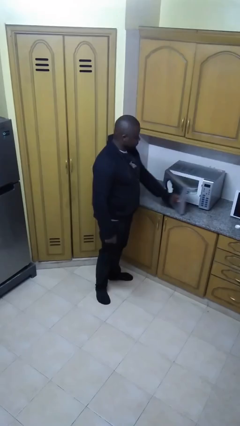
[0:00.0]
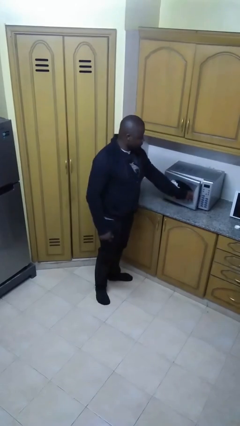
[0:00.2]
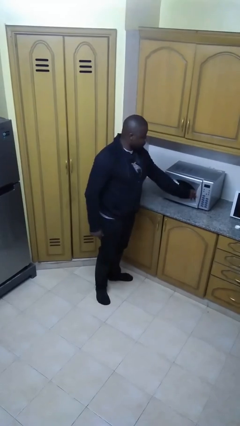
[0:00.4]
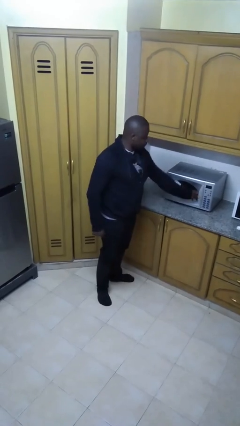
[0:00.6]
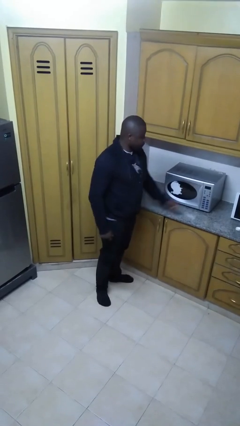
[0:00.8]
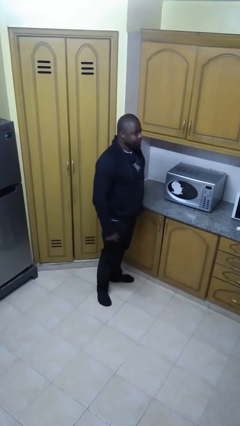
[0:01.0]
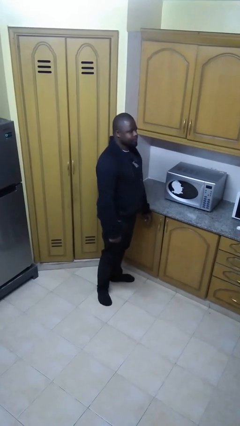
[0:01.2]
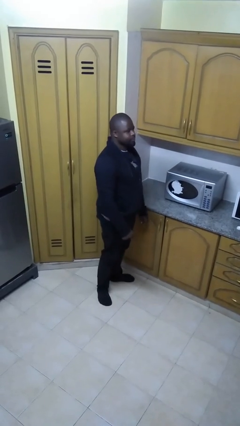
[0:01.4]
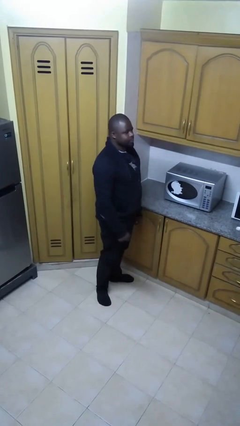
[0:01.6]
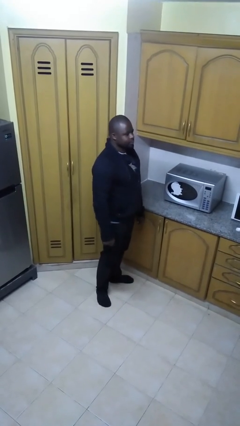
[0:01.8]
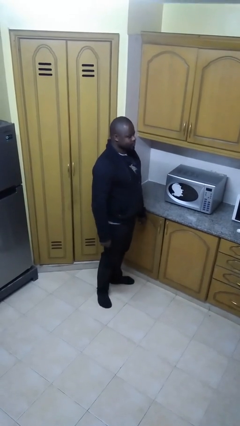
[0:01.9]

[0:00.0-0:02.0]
person closes microwave

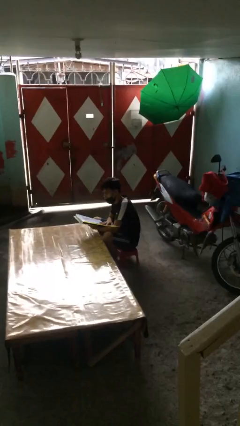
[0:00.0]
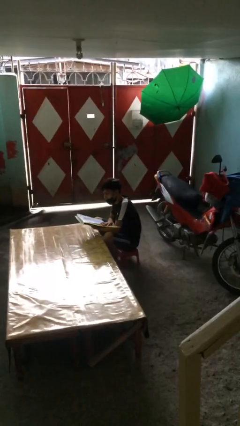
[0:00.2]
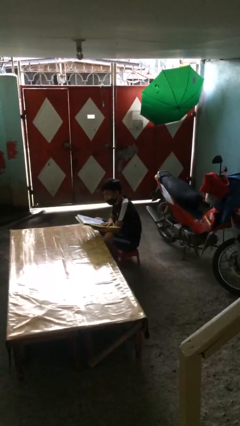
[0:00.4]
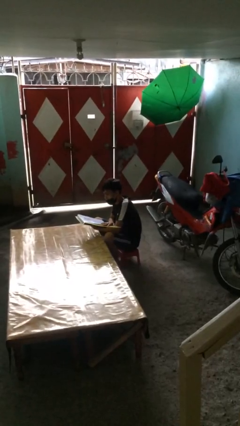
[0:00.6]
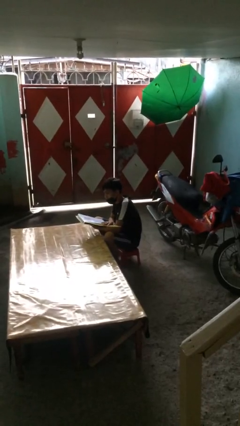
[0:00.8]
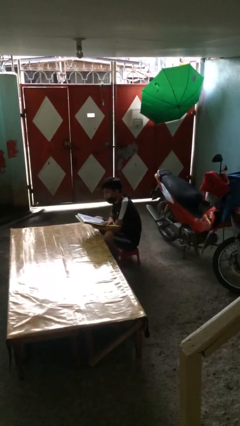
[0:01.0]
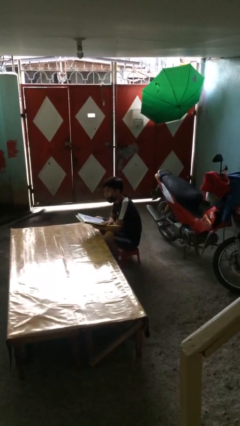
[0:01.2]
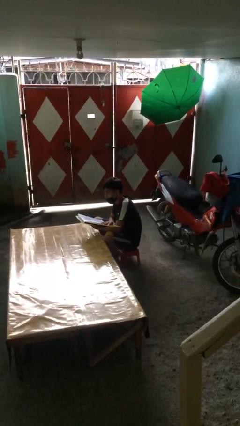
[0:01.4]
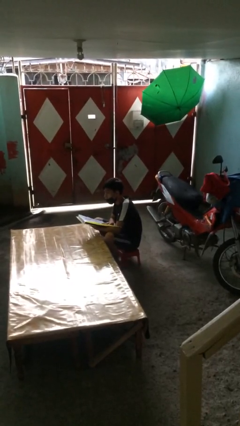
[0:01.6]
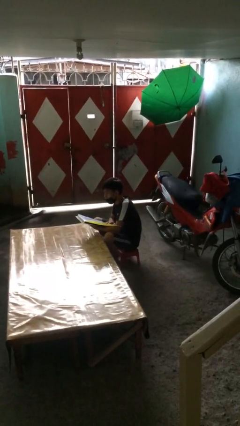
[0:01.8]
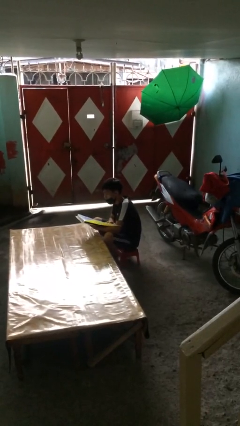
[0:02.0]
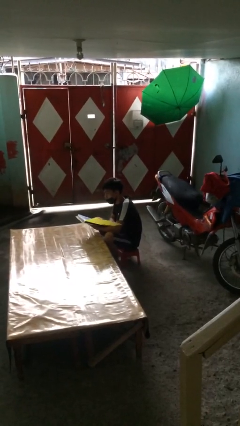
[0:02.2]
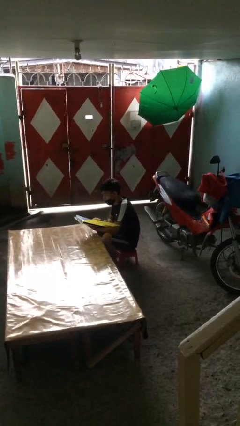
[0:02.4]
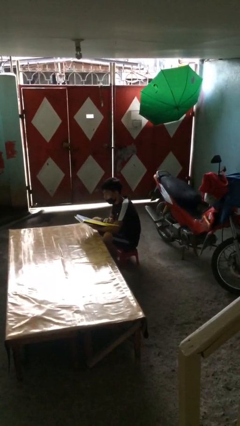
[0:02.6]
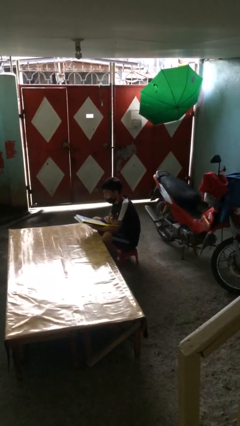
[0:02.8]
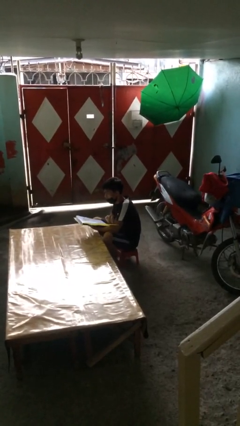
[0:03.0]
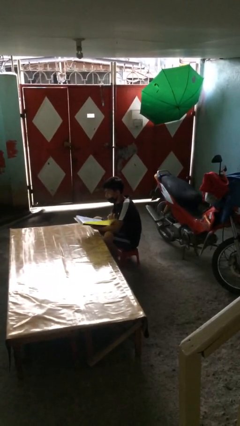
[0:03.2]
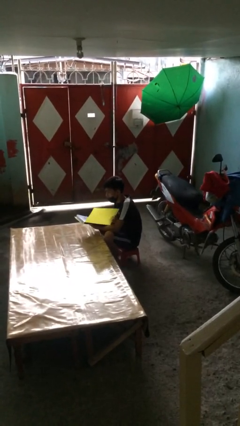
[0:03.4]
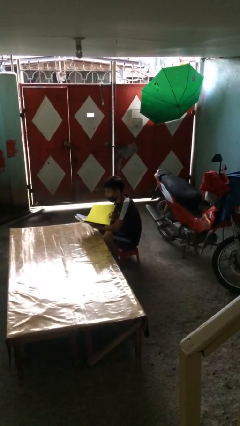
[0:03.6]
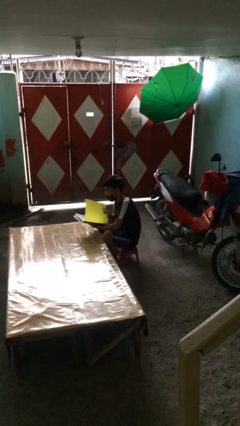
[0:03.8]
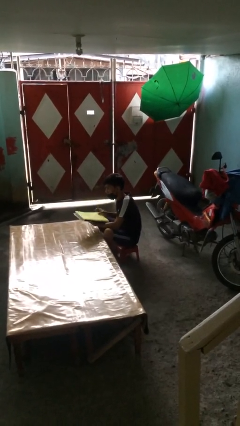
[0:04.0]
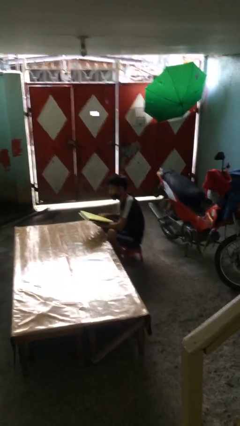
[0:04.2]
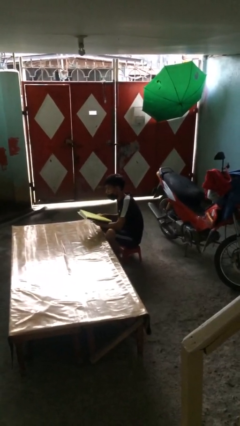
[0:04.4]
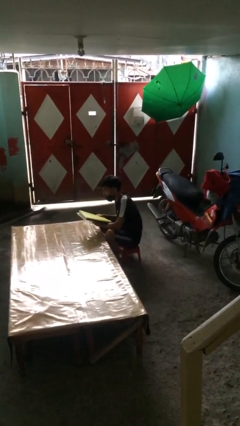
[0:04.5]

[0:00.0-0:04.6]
person reads document

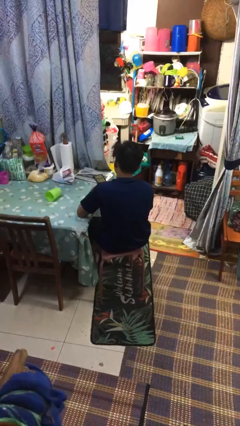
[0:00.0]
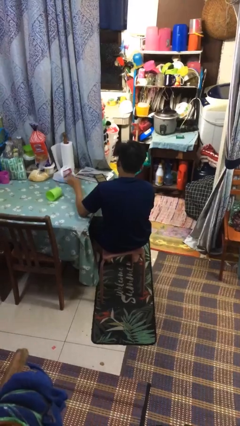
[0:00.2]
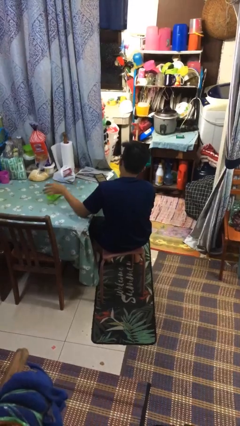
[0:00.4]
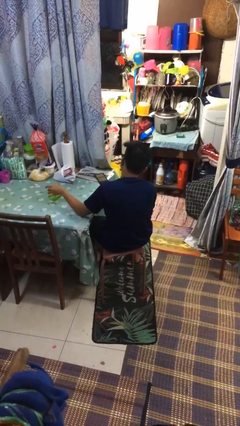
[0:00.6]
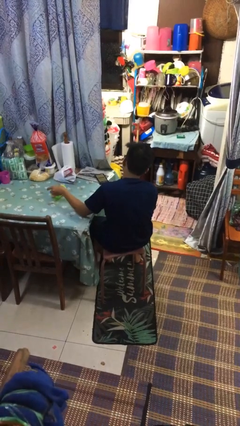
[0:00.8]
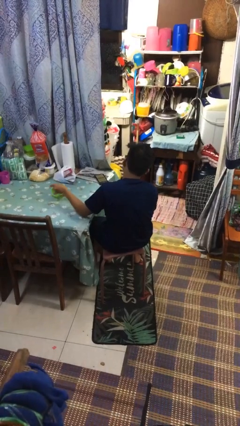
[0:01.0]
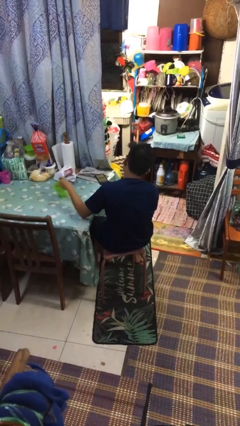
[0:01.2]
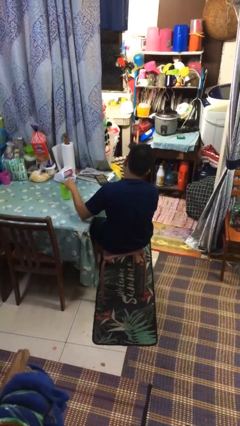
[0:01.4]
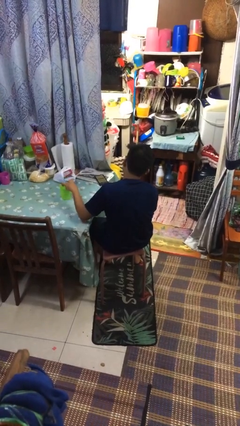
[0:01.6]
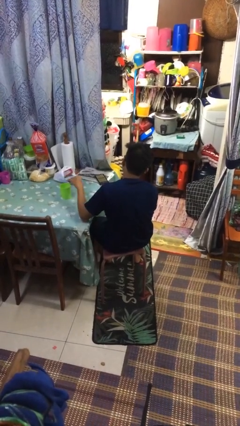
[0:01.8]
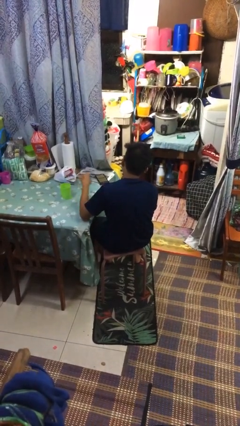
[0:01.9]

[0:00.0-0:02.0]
person sets upright glass

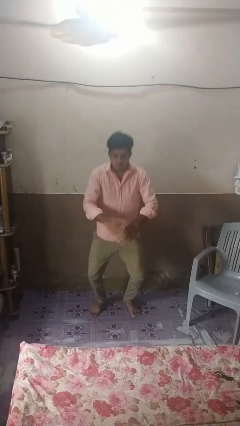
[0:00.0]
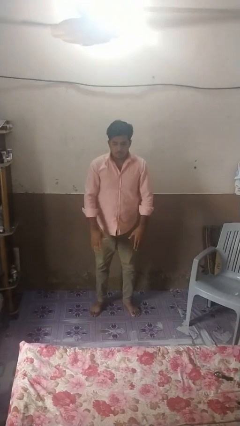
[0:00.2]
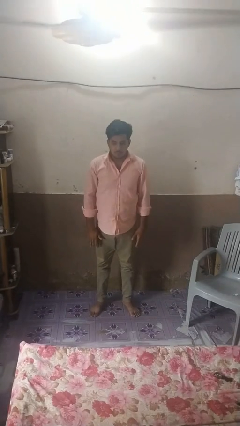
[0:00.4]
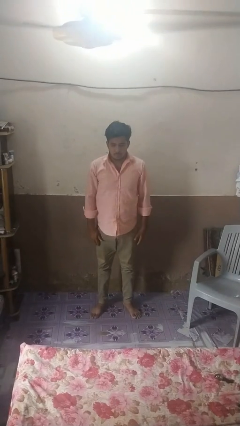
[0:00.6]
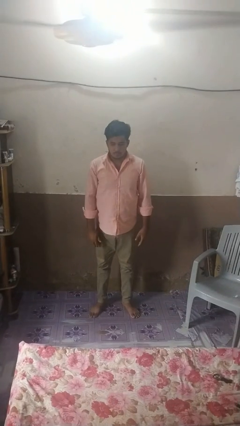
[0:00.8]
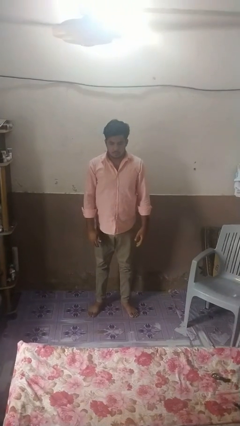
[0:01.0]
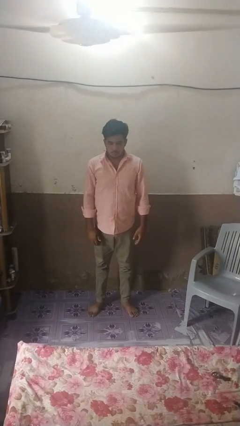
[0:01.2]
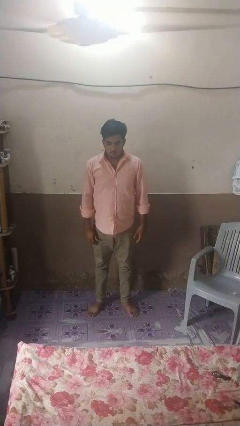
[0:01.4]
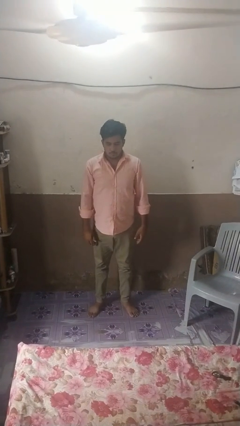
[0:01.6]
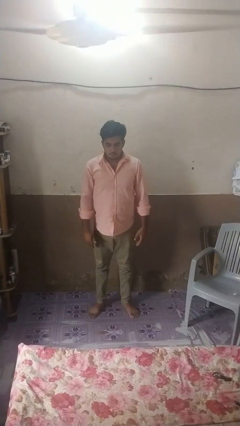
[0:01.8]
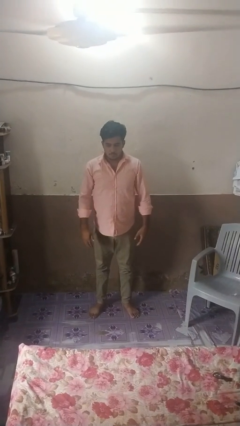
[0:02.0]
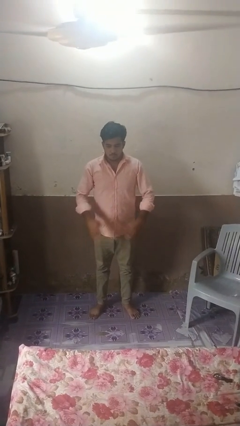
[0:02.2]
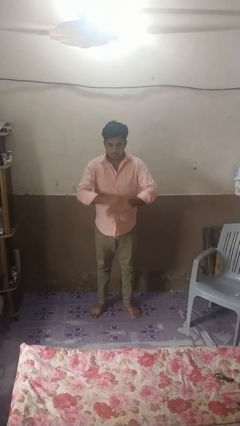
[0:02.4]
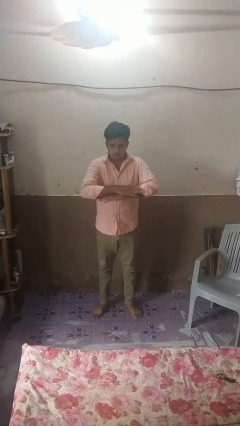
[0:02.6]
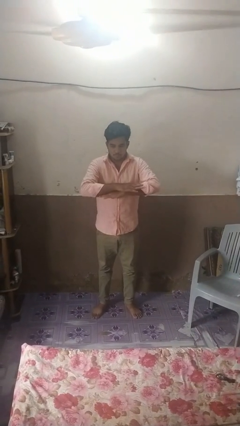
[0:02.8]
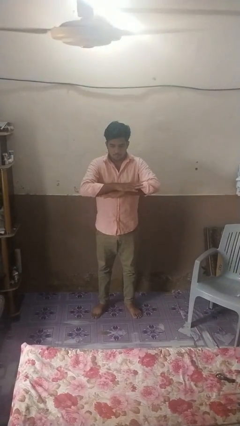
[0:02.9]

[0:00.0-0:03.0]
person stands up

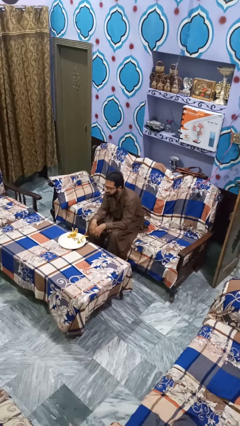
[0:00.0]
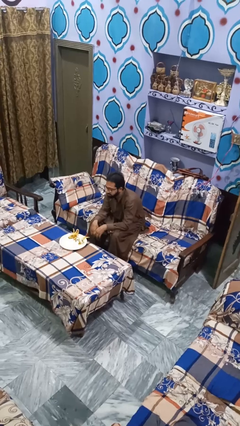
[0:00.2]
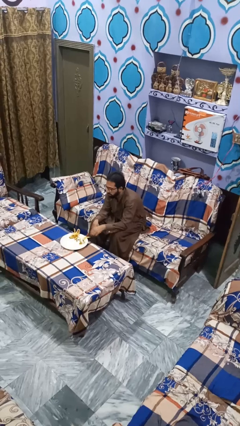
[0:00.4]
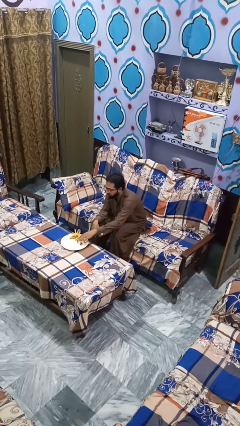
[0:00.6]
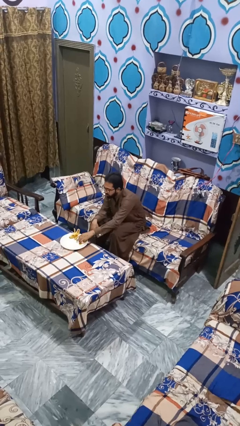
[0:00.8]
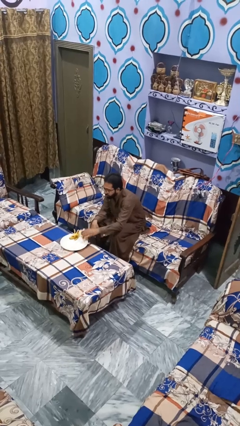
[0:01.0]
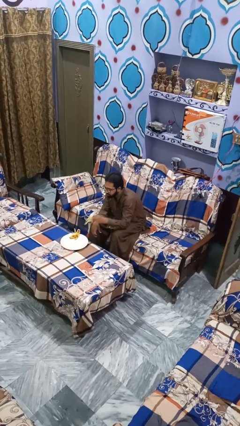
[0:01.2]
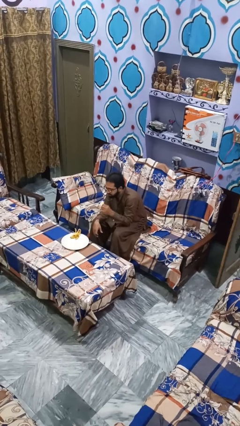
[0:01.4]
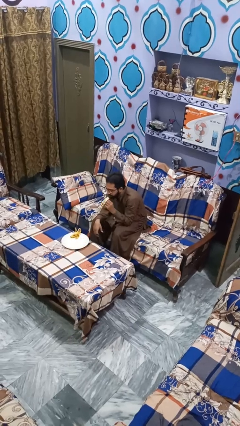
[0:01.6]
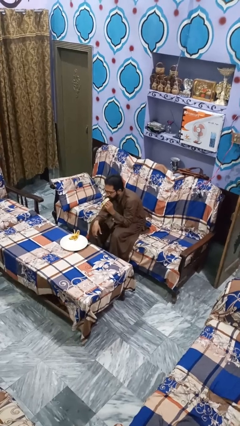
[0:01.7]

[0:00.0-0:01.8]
person eats banana

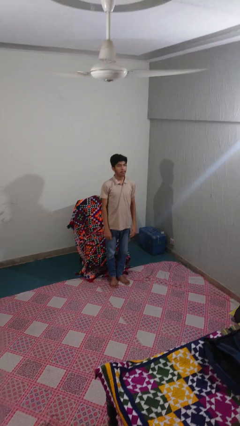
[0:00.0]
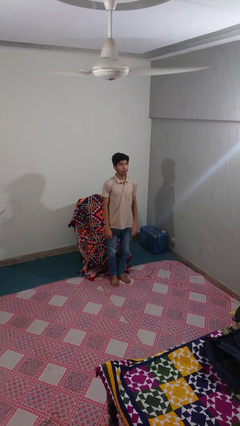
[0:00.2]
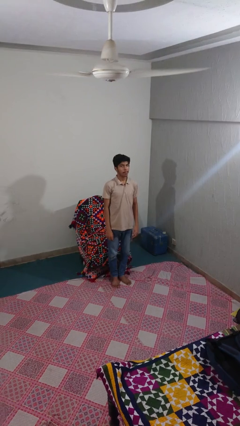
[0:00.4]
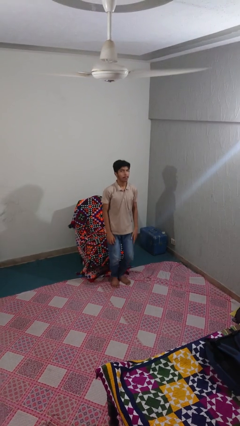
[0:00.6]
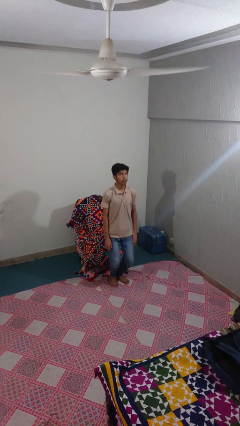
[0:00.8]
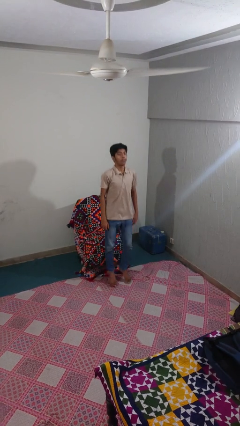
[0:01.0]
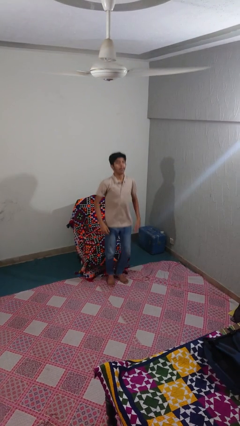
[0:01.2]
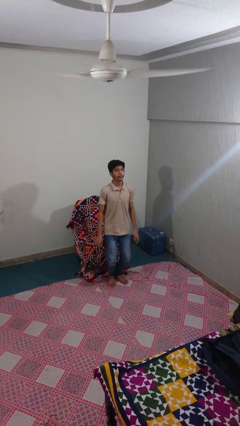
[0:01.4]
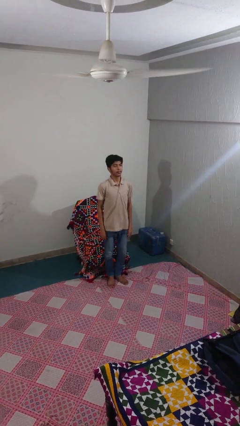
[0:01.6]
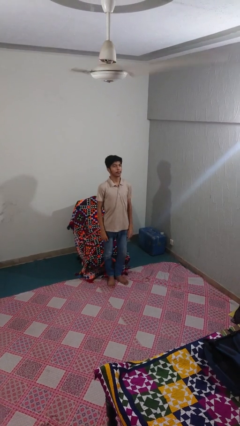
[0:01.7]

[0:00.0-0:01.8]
person jumps

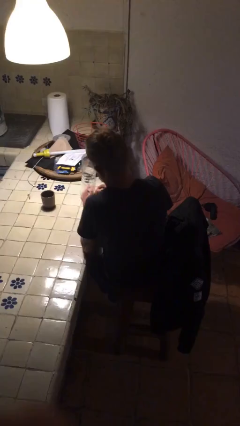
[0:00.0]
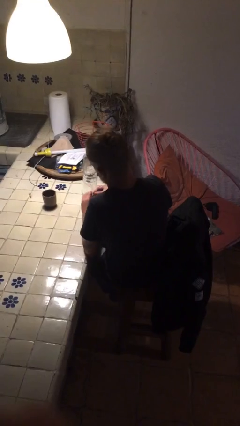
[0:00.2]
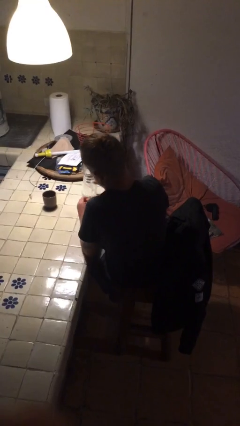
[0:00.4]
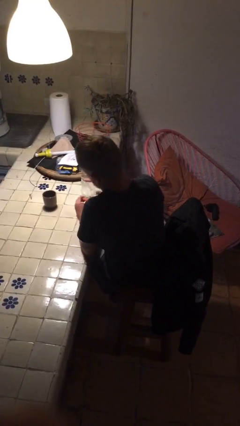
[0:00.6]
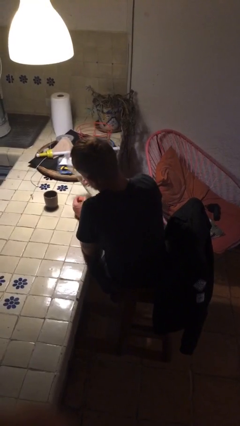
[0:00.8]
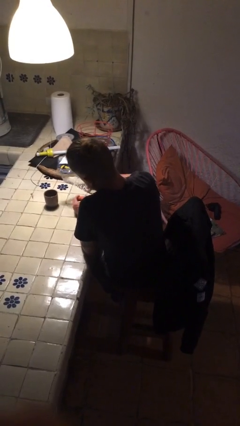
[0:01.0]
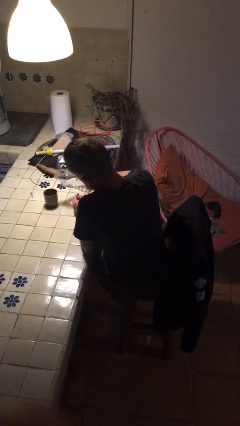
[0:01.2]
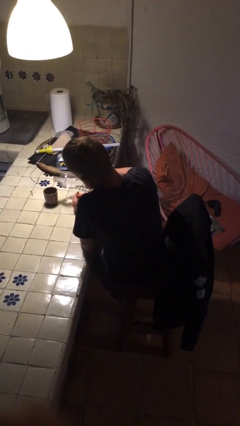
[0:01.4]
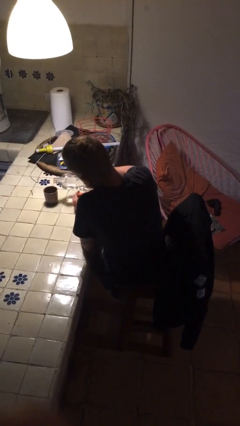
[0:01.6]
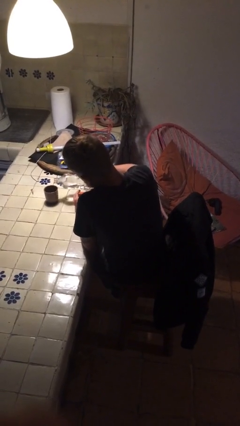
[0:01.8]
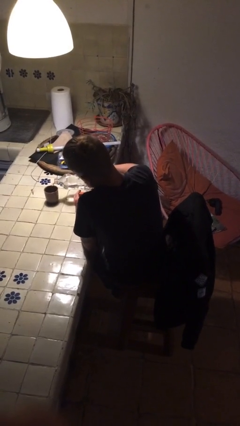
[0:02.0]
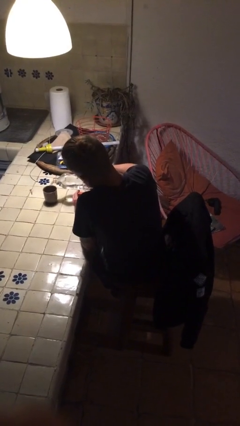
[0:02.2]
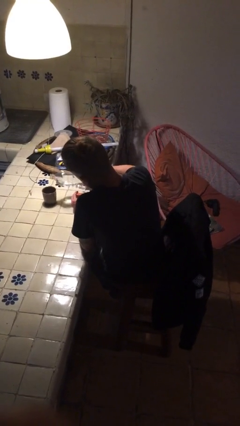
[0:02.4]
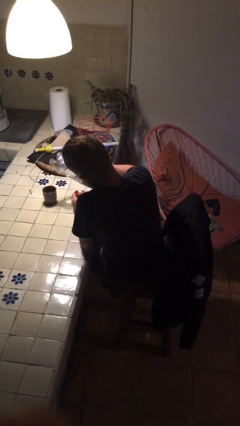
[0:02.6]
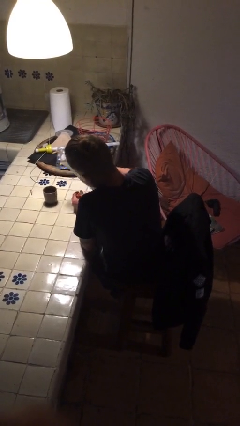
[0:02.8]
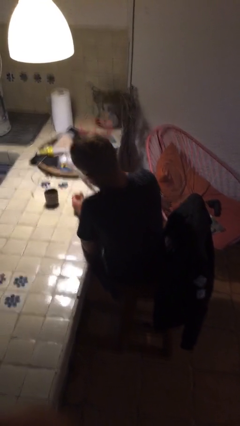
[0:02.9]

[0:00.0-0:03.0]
person pours liquid into cup
